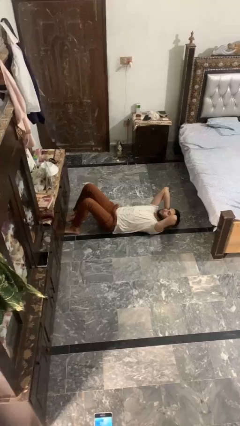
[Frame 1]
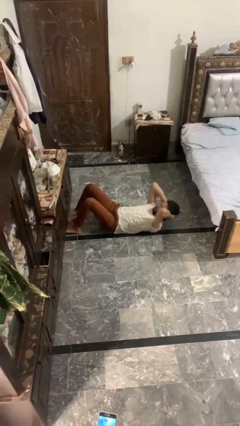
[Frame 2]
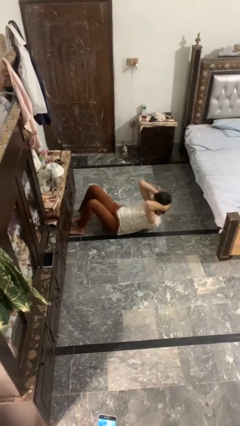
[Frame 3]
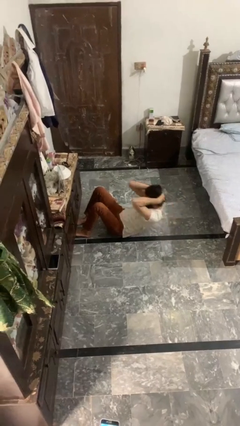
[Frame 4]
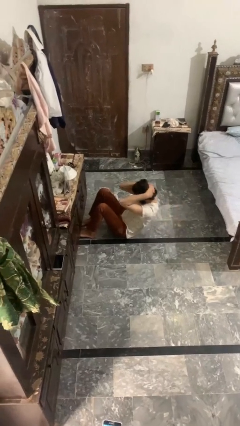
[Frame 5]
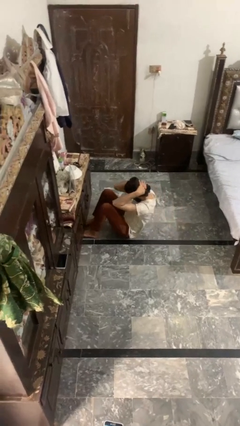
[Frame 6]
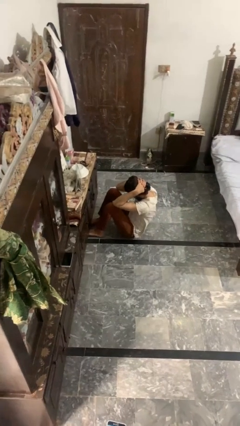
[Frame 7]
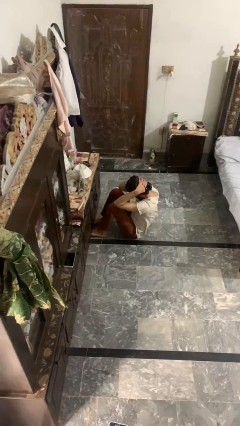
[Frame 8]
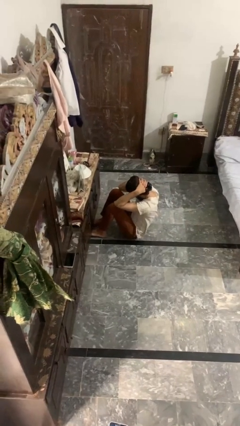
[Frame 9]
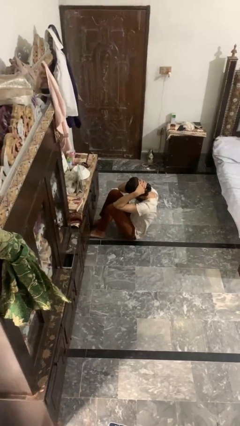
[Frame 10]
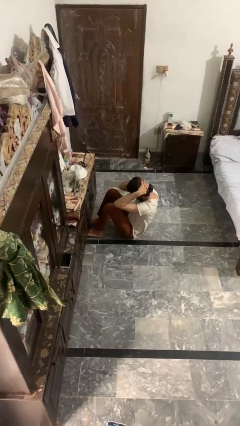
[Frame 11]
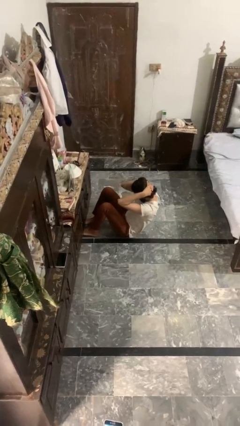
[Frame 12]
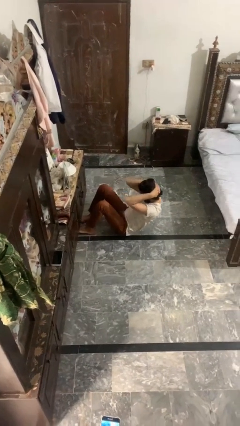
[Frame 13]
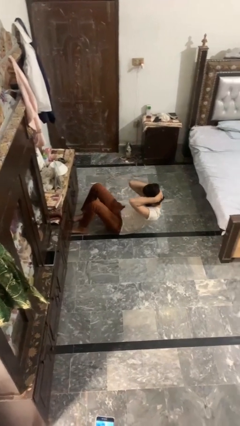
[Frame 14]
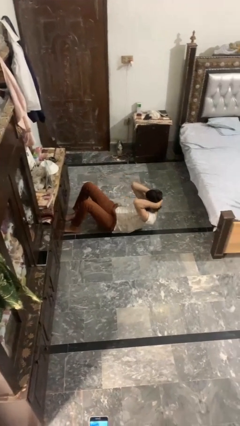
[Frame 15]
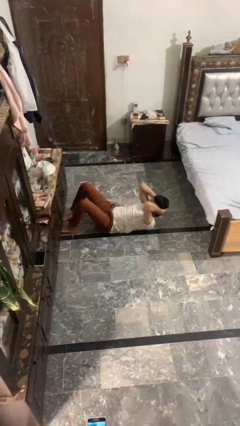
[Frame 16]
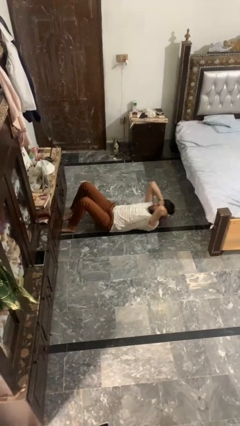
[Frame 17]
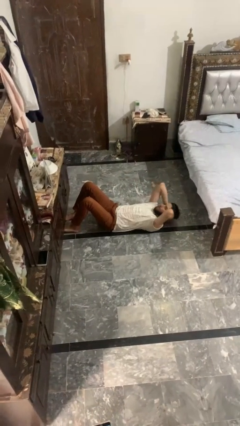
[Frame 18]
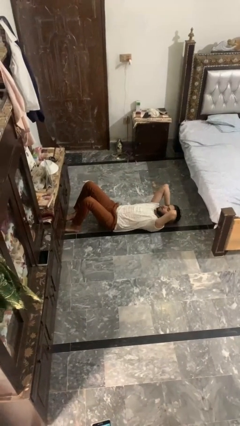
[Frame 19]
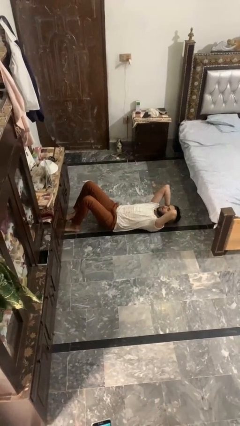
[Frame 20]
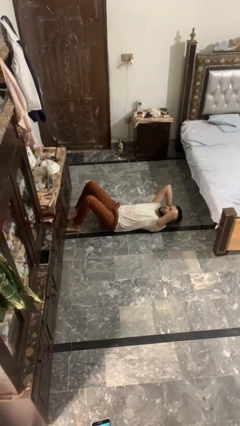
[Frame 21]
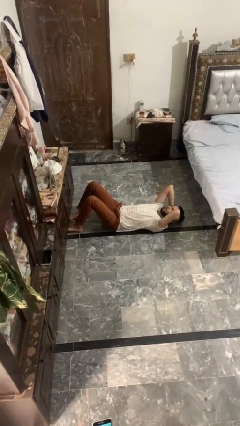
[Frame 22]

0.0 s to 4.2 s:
person exercises with situp

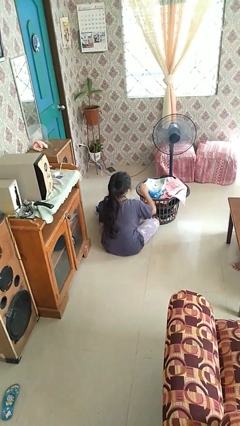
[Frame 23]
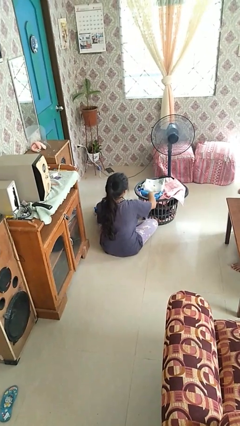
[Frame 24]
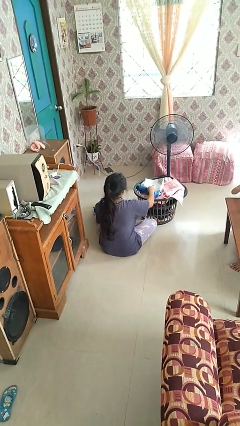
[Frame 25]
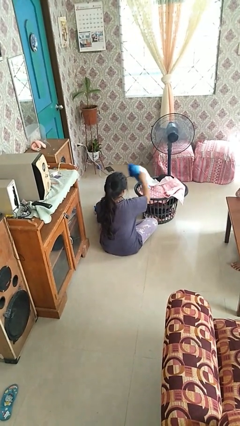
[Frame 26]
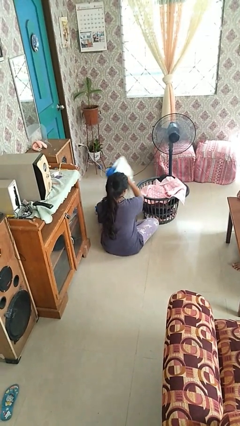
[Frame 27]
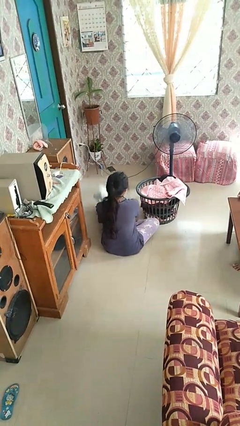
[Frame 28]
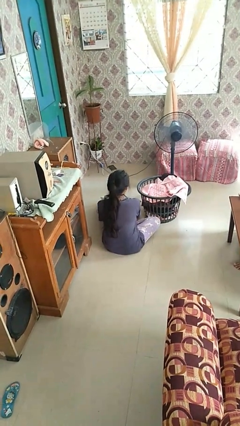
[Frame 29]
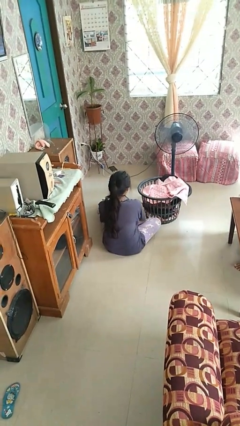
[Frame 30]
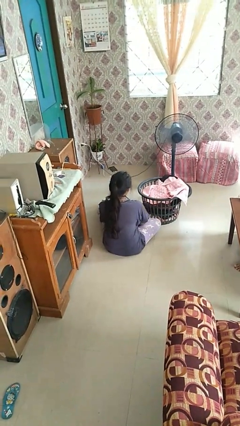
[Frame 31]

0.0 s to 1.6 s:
person takes object from basket

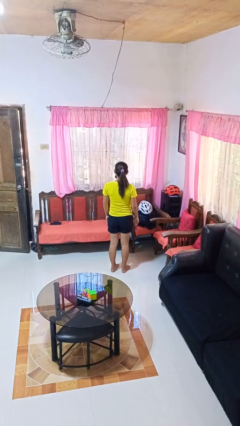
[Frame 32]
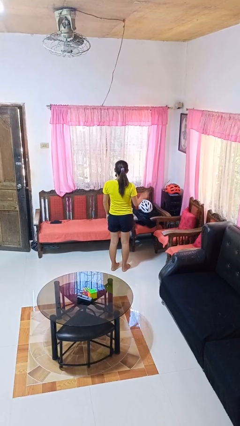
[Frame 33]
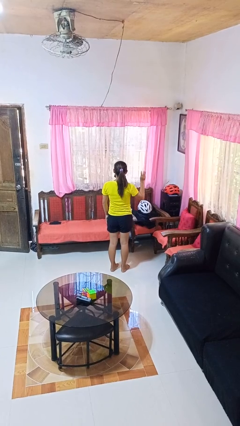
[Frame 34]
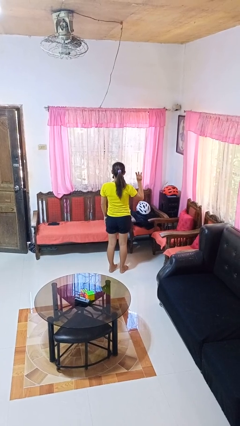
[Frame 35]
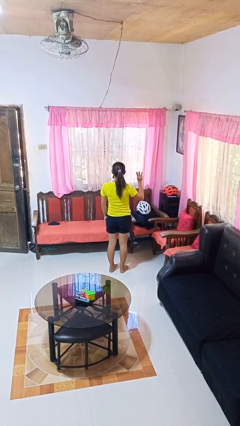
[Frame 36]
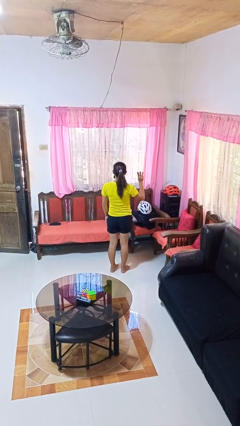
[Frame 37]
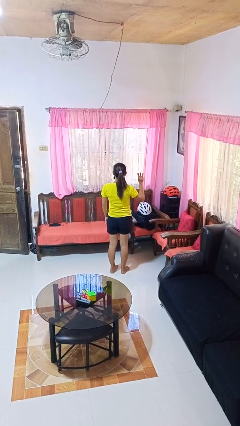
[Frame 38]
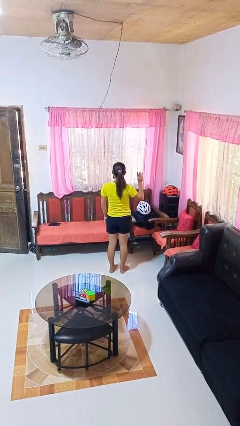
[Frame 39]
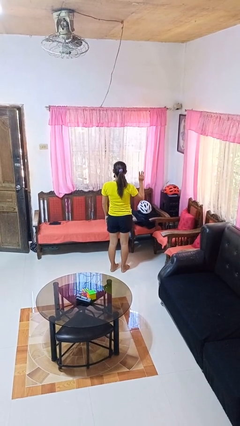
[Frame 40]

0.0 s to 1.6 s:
person gestures number three

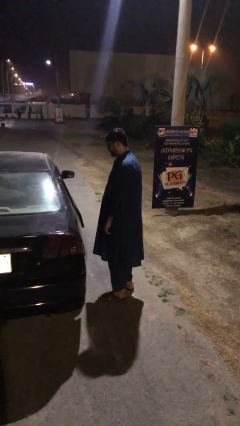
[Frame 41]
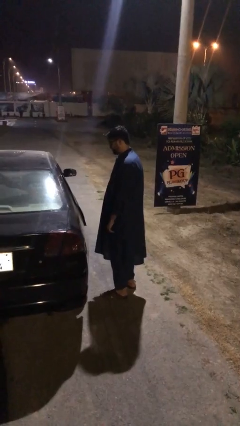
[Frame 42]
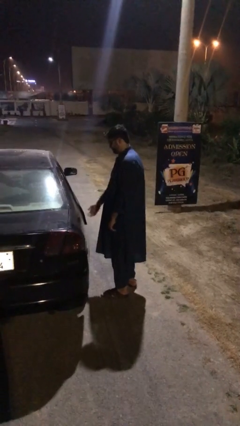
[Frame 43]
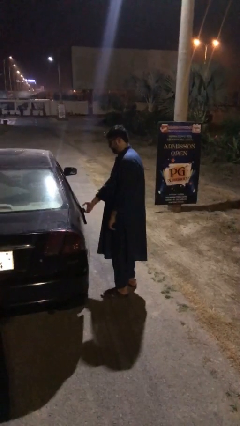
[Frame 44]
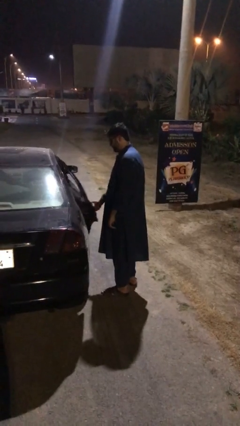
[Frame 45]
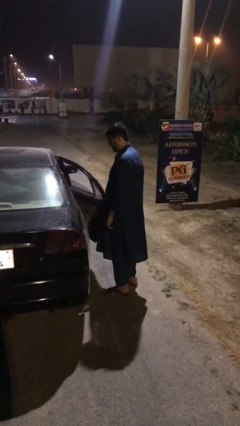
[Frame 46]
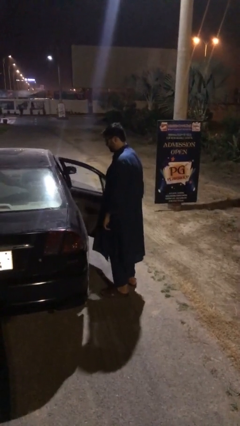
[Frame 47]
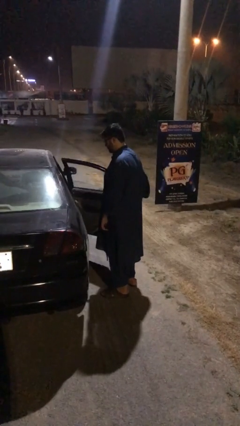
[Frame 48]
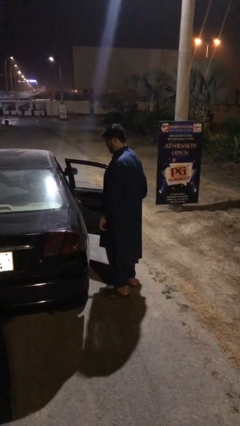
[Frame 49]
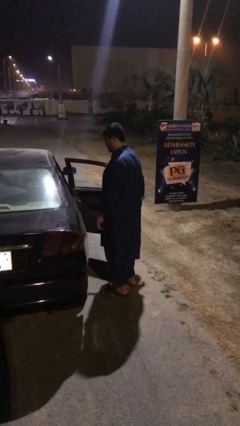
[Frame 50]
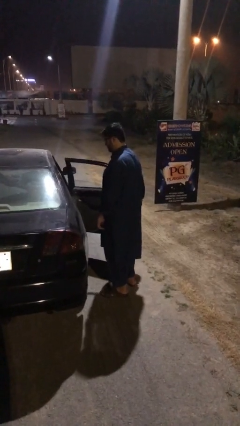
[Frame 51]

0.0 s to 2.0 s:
person opens car door

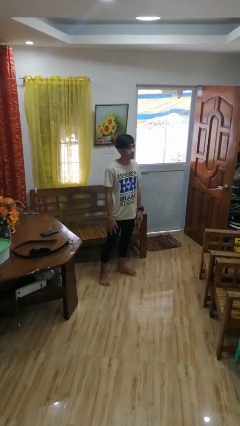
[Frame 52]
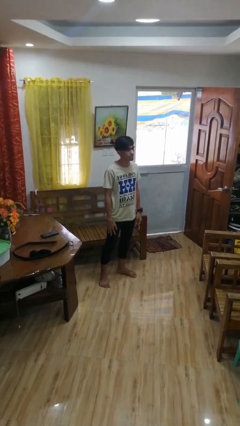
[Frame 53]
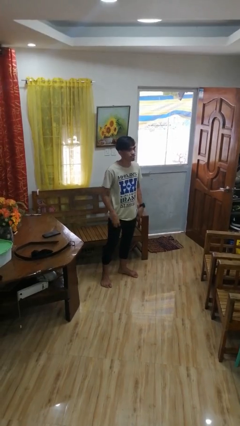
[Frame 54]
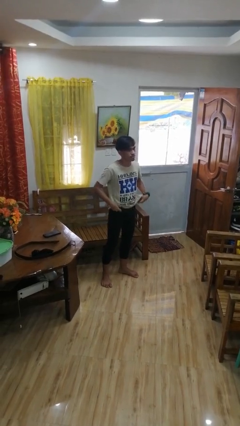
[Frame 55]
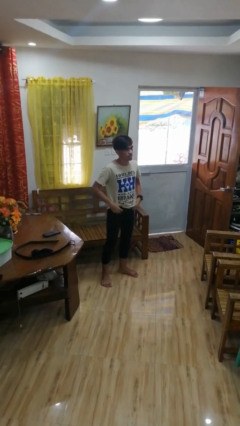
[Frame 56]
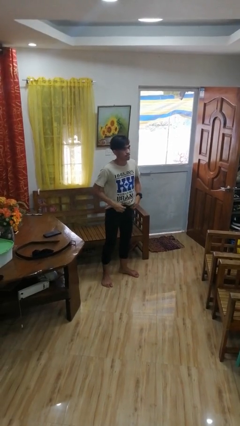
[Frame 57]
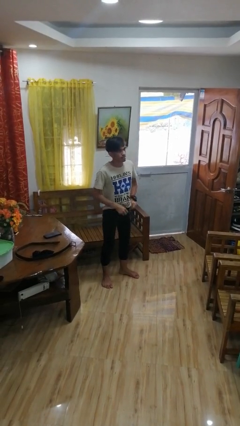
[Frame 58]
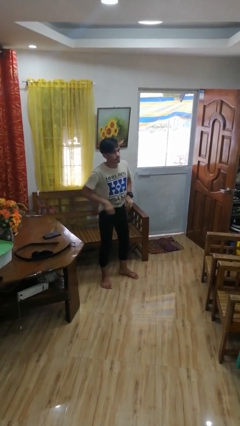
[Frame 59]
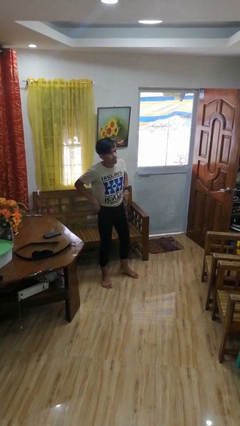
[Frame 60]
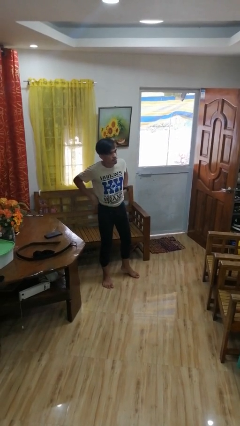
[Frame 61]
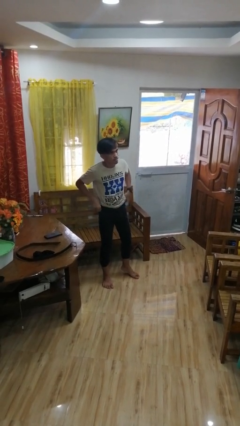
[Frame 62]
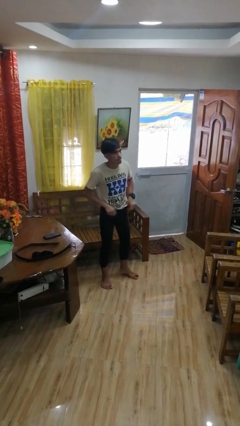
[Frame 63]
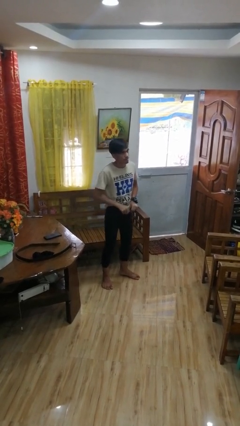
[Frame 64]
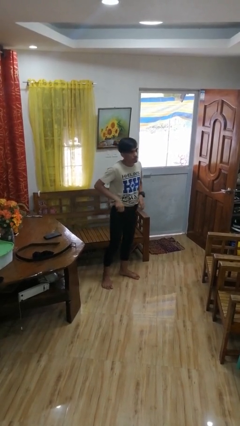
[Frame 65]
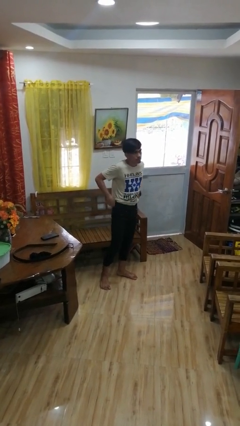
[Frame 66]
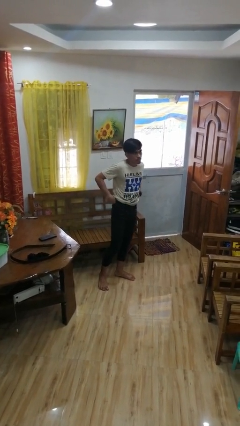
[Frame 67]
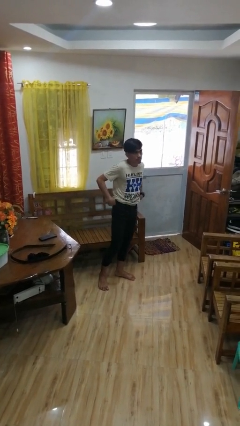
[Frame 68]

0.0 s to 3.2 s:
person hikes up pants

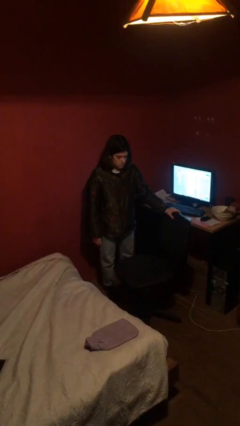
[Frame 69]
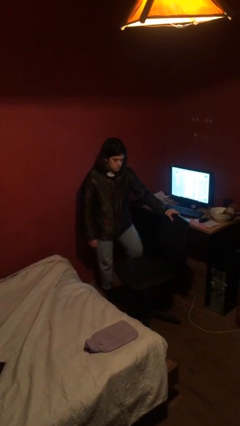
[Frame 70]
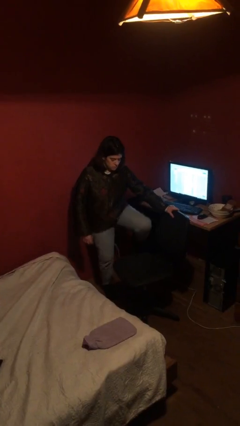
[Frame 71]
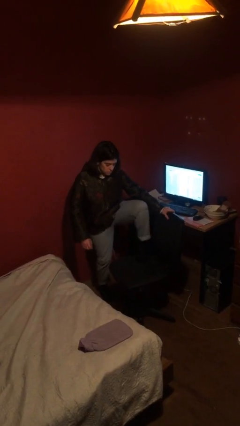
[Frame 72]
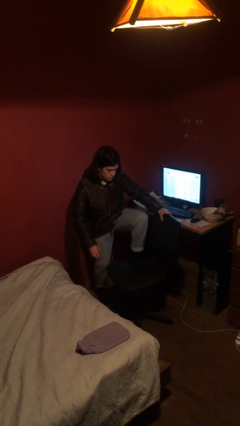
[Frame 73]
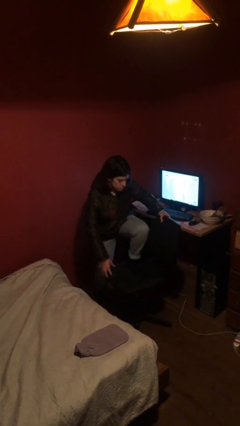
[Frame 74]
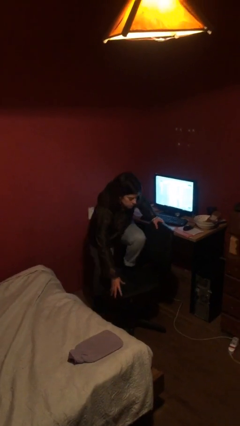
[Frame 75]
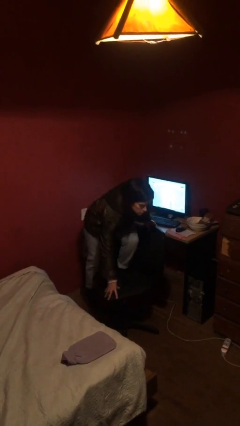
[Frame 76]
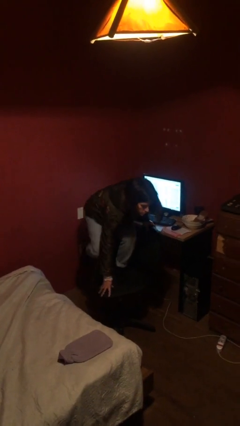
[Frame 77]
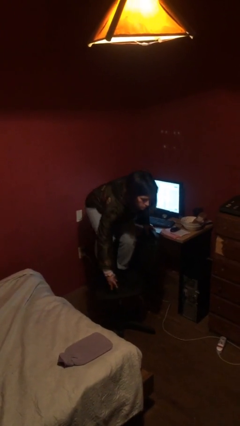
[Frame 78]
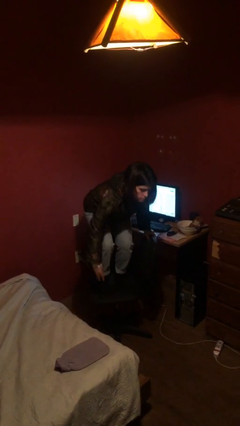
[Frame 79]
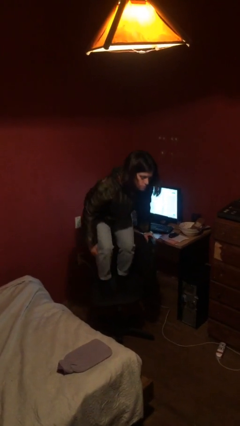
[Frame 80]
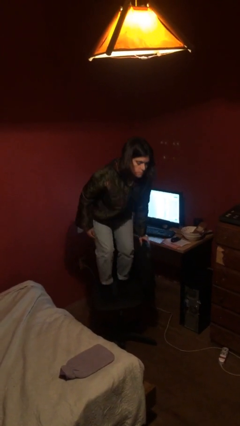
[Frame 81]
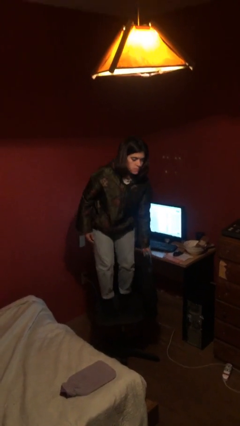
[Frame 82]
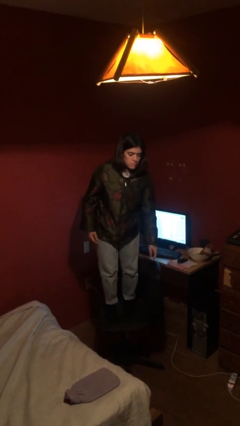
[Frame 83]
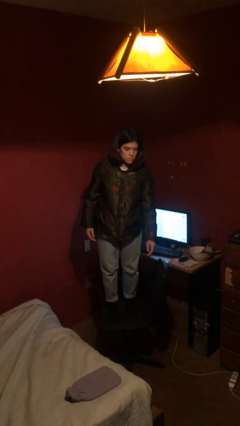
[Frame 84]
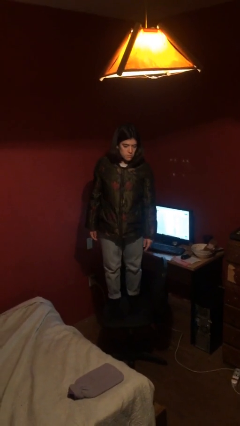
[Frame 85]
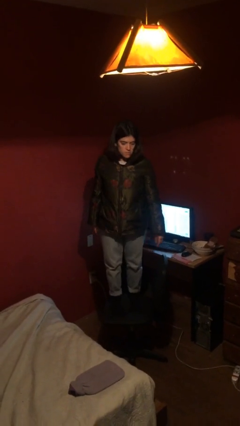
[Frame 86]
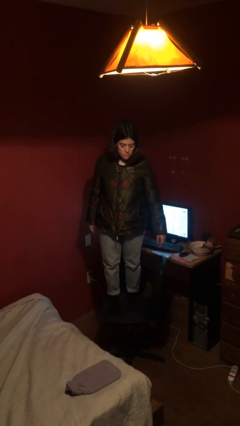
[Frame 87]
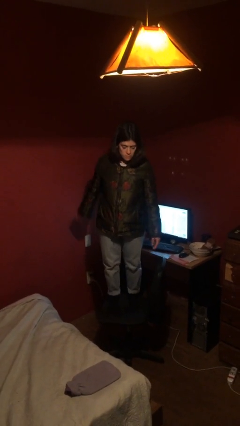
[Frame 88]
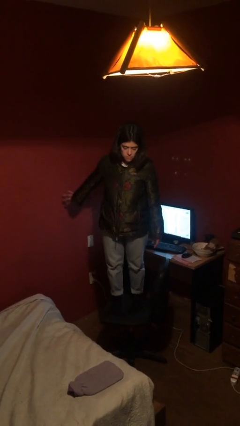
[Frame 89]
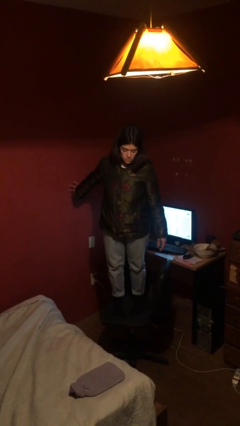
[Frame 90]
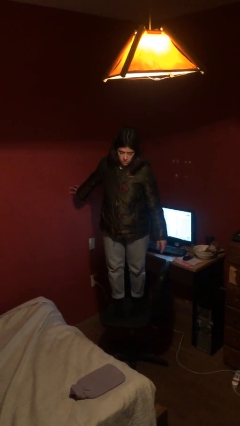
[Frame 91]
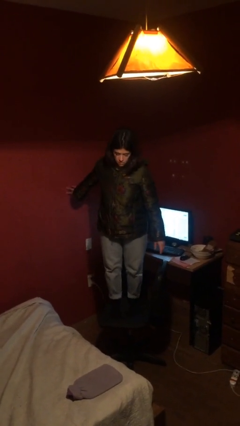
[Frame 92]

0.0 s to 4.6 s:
person climbs on chair
